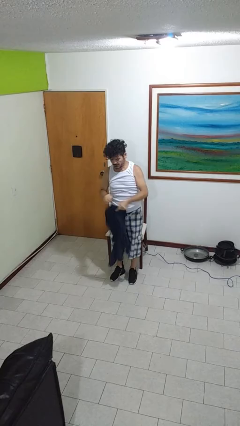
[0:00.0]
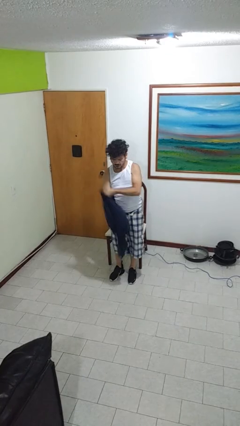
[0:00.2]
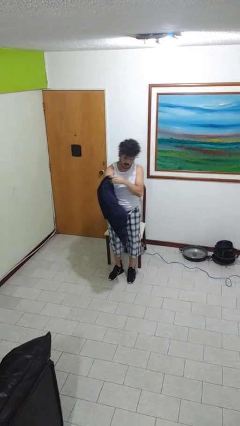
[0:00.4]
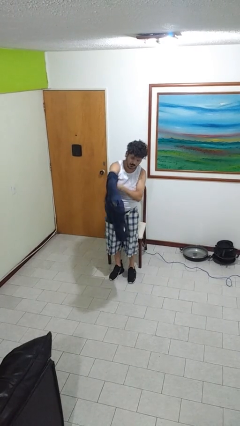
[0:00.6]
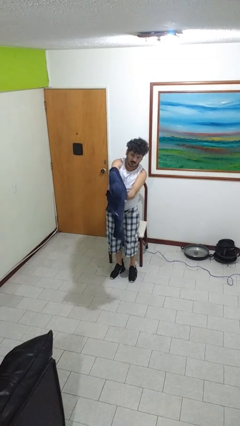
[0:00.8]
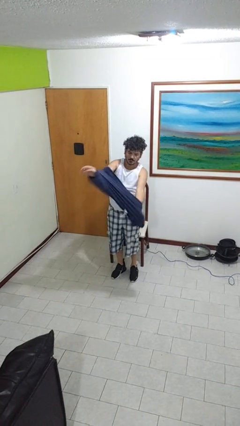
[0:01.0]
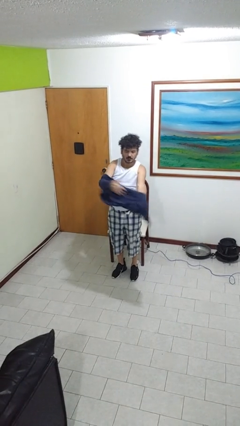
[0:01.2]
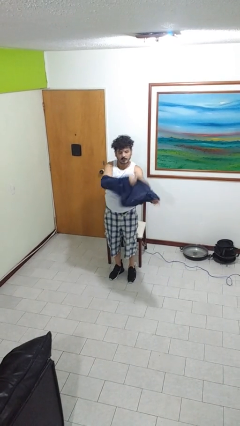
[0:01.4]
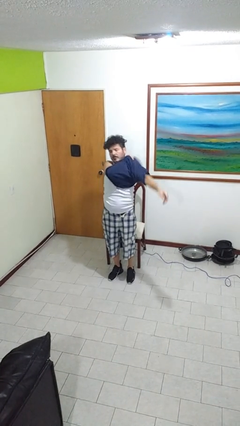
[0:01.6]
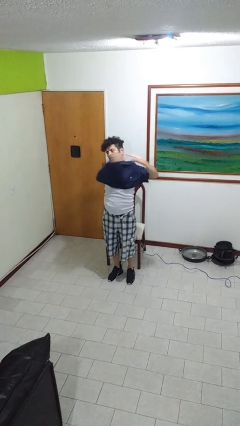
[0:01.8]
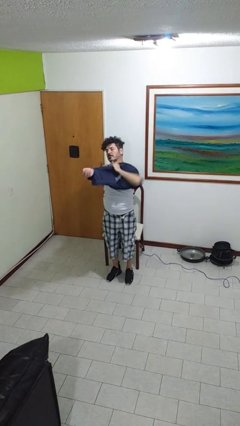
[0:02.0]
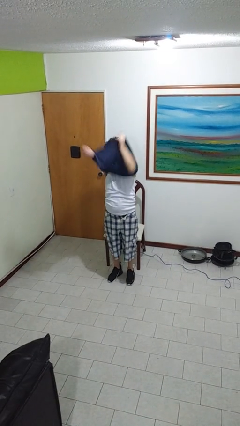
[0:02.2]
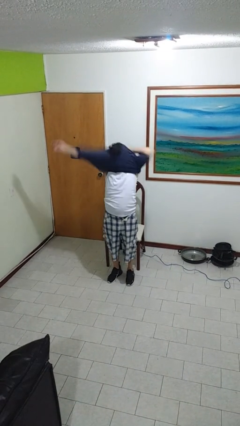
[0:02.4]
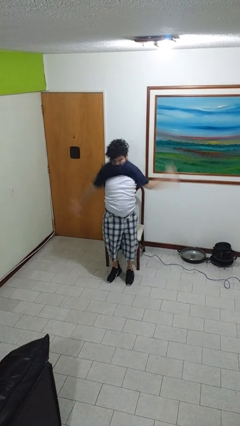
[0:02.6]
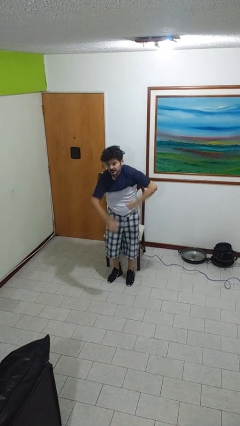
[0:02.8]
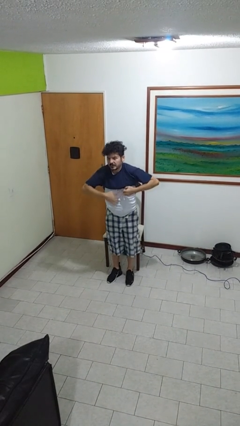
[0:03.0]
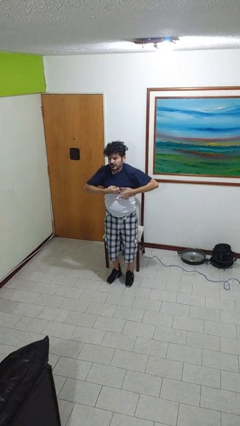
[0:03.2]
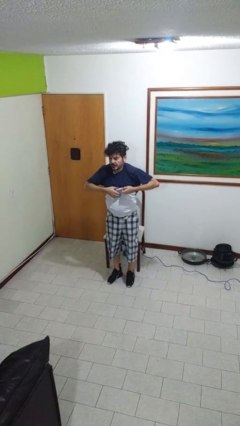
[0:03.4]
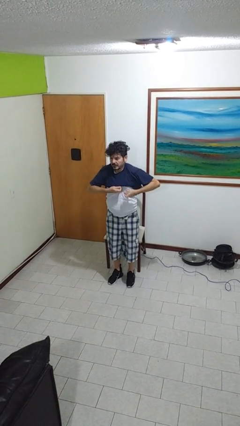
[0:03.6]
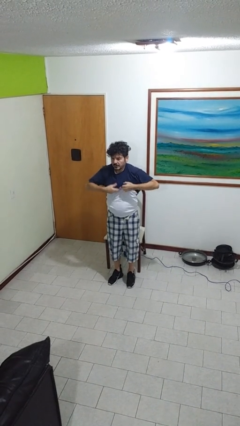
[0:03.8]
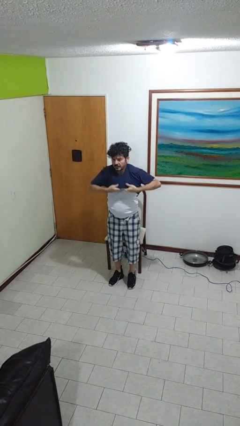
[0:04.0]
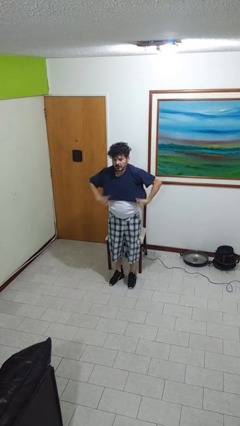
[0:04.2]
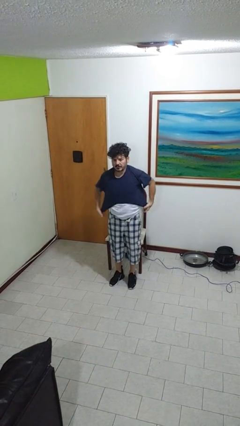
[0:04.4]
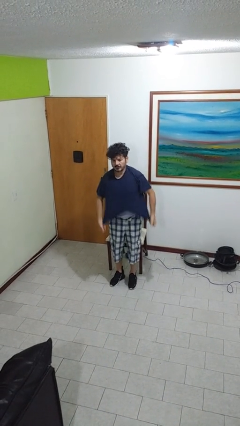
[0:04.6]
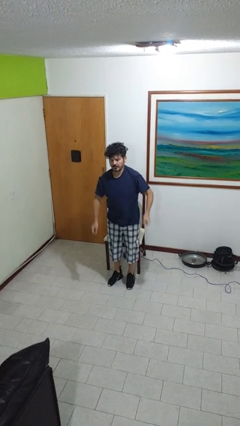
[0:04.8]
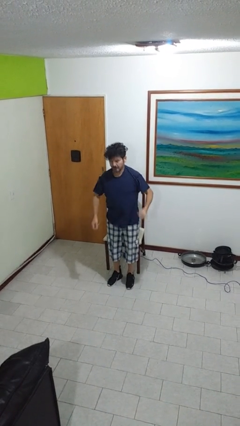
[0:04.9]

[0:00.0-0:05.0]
person puts on shirt

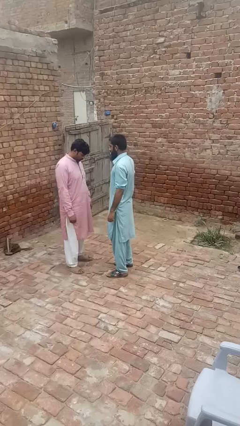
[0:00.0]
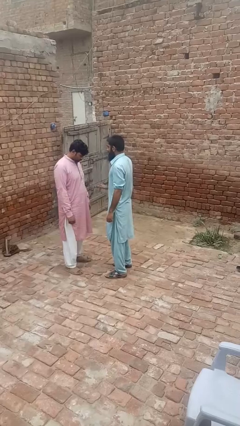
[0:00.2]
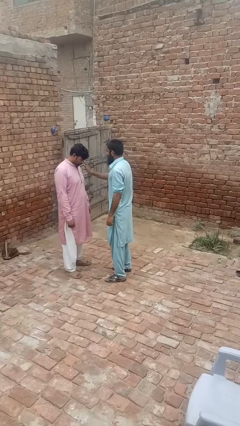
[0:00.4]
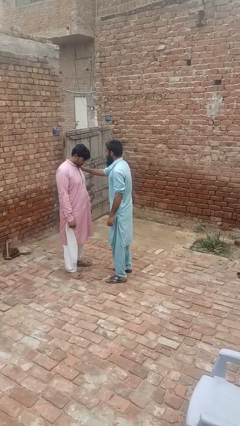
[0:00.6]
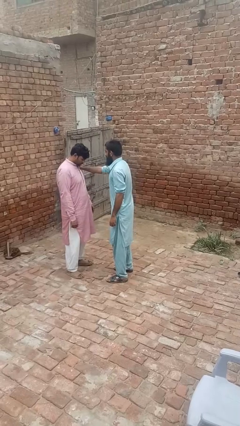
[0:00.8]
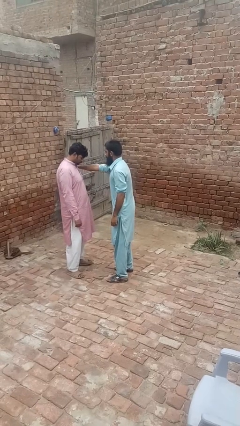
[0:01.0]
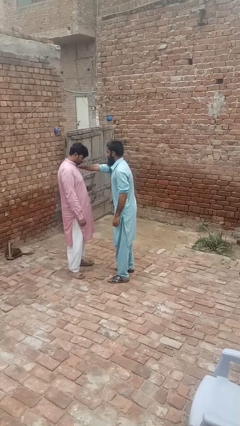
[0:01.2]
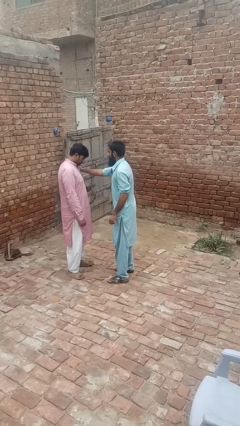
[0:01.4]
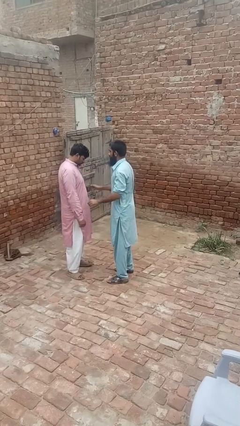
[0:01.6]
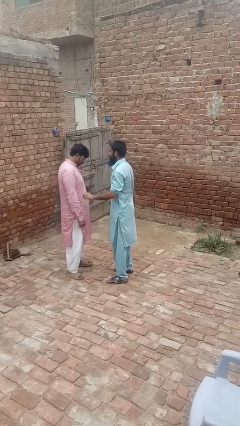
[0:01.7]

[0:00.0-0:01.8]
person shoves person

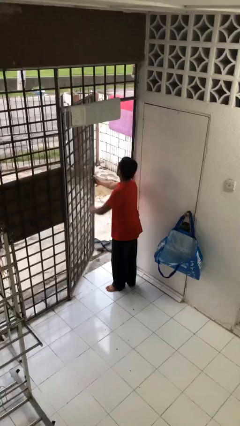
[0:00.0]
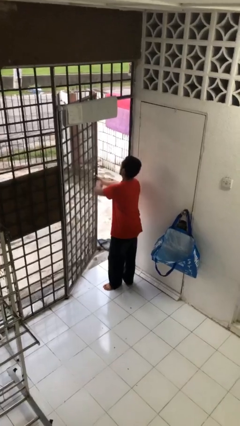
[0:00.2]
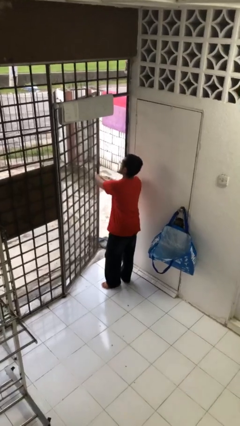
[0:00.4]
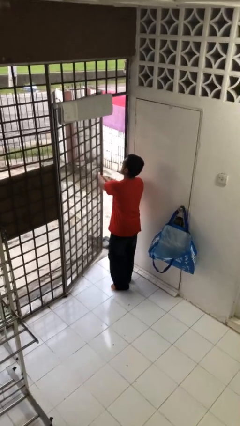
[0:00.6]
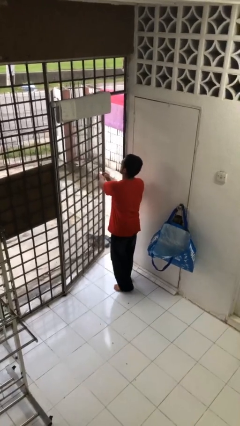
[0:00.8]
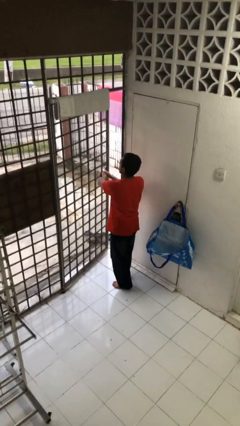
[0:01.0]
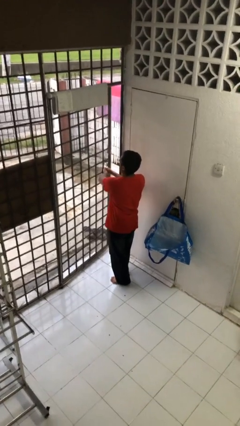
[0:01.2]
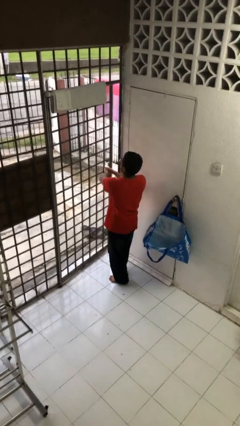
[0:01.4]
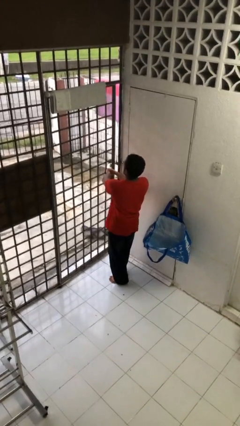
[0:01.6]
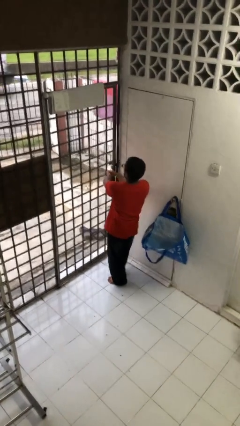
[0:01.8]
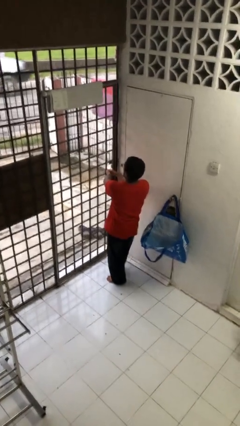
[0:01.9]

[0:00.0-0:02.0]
person closes facility door

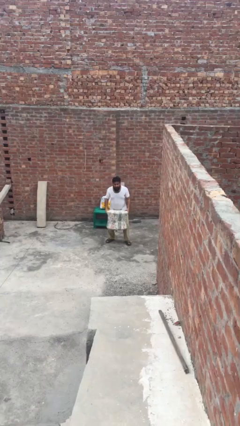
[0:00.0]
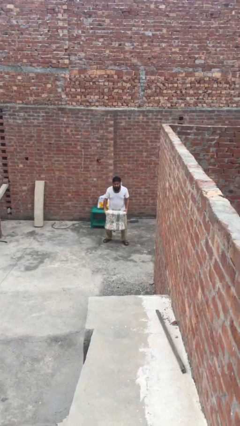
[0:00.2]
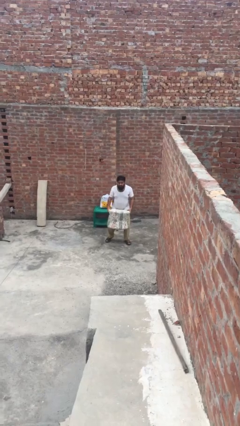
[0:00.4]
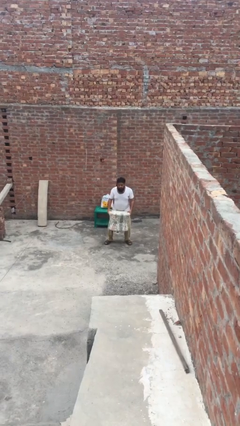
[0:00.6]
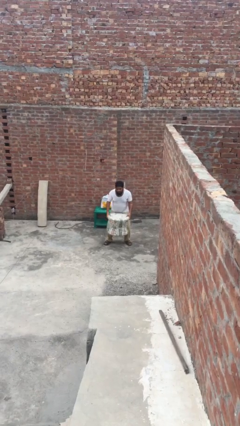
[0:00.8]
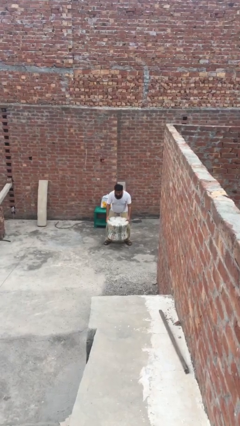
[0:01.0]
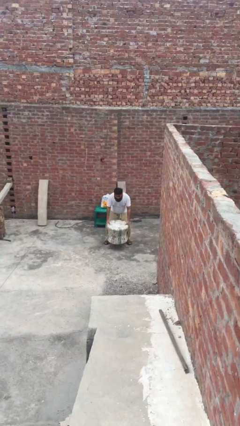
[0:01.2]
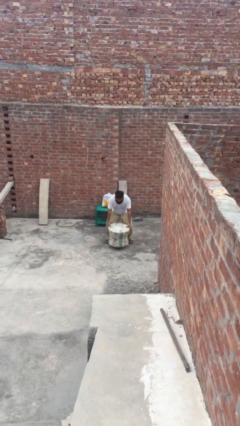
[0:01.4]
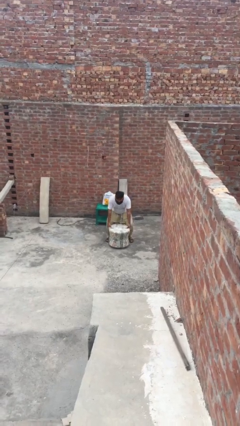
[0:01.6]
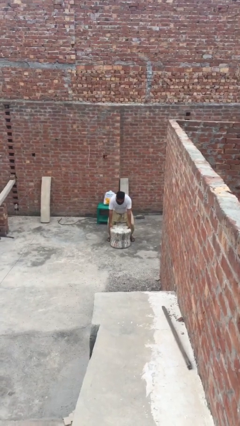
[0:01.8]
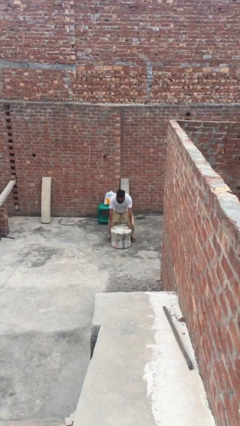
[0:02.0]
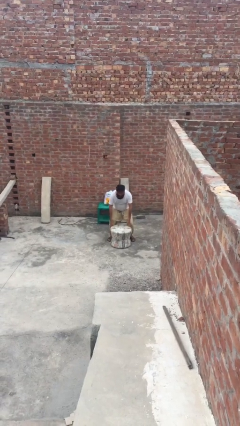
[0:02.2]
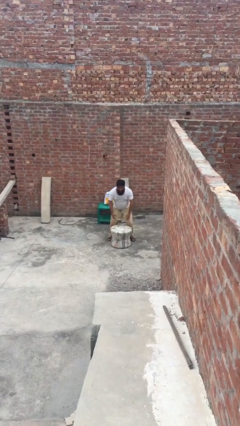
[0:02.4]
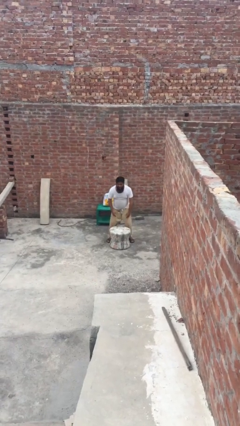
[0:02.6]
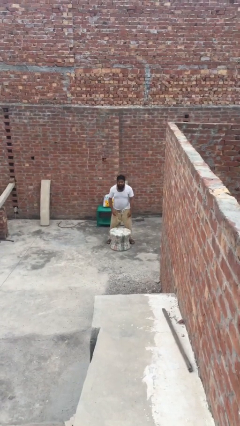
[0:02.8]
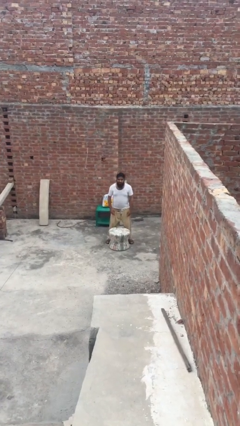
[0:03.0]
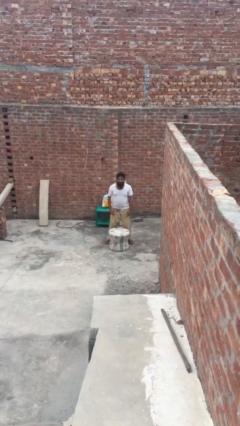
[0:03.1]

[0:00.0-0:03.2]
person puts down object on floor

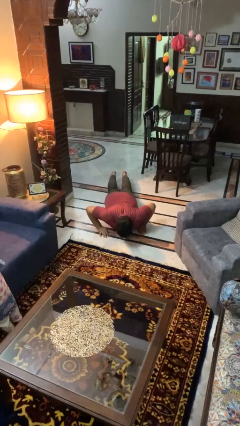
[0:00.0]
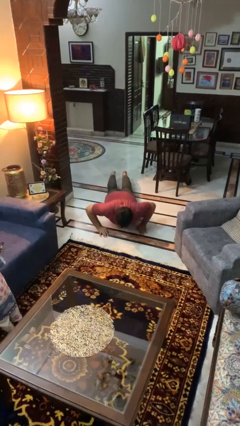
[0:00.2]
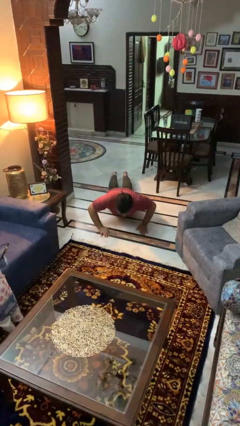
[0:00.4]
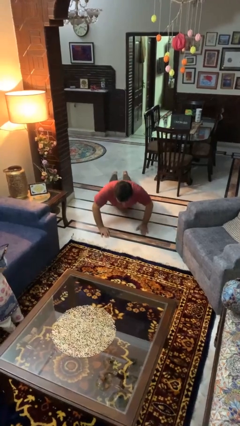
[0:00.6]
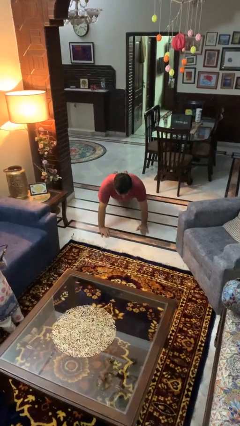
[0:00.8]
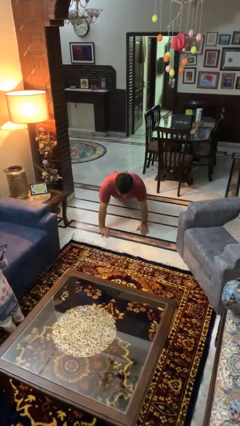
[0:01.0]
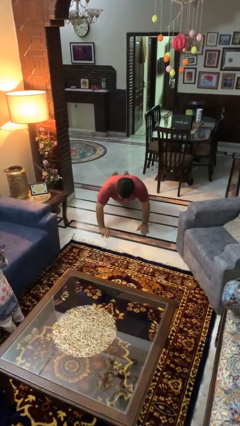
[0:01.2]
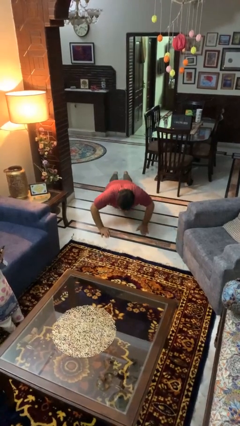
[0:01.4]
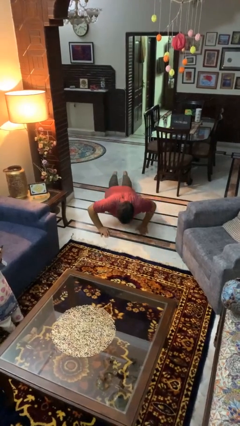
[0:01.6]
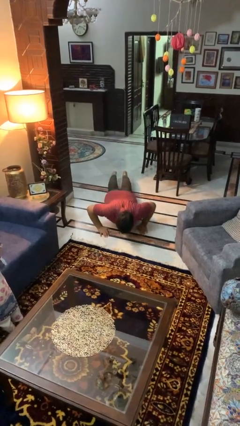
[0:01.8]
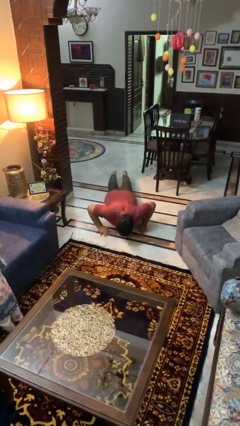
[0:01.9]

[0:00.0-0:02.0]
person exercises with pushup

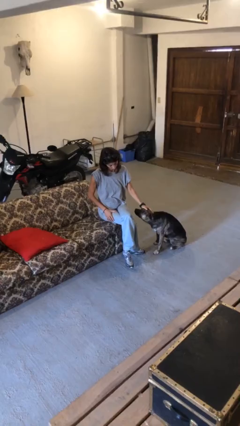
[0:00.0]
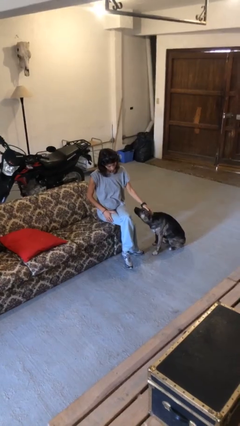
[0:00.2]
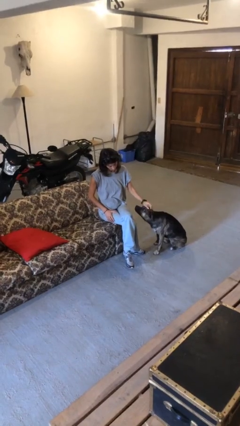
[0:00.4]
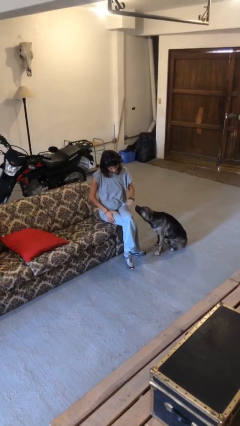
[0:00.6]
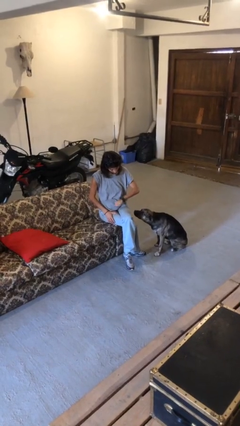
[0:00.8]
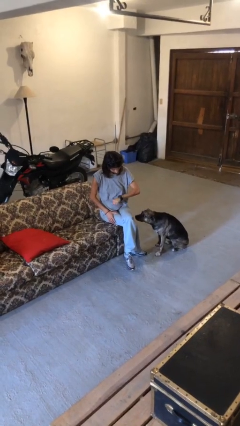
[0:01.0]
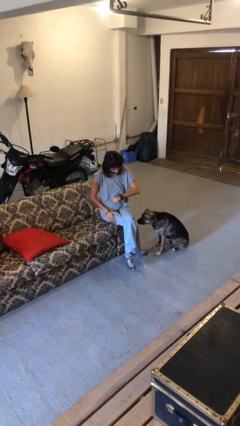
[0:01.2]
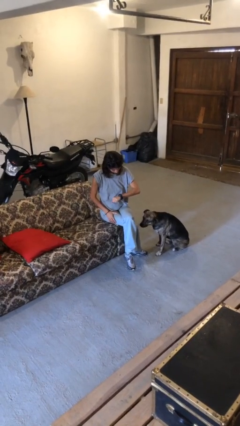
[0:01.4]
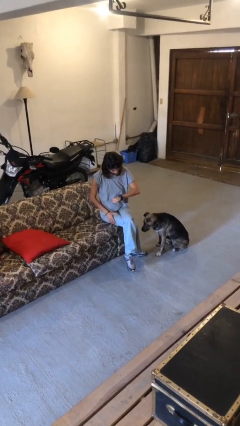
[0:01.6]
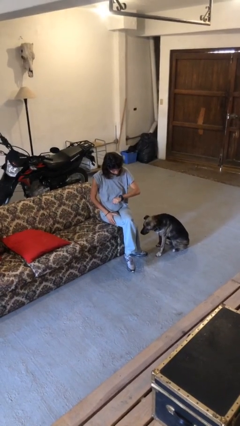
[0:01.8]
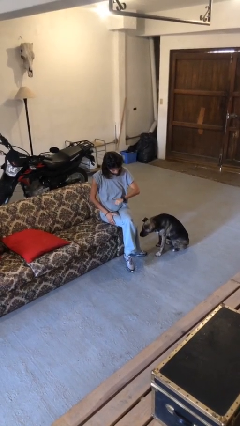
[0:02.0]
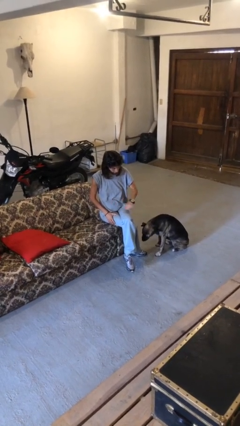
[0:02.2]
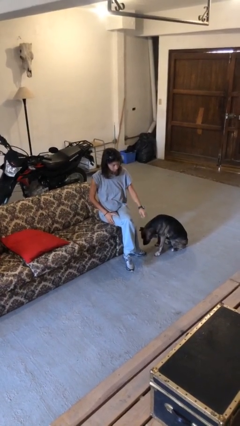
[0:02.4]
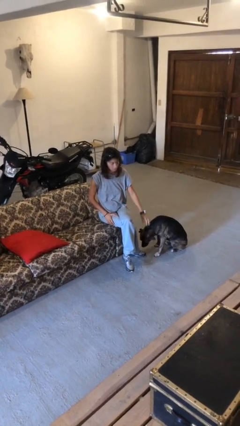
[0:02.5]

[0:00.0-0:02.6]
person looks at wristwatch

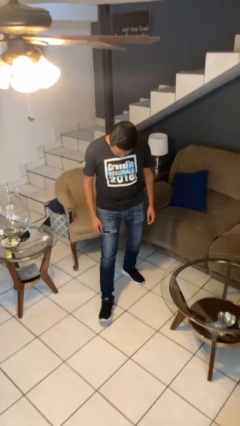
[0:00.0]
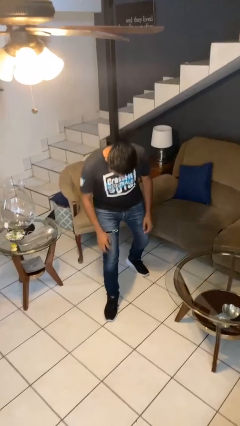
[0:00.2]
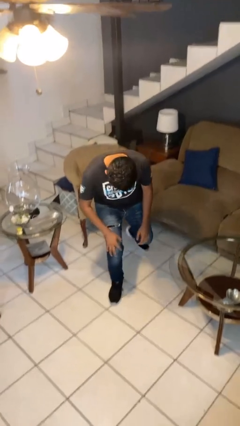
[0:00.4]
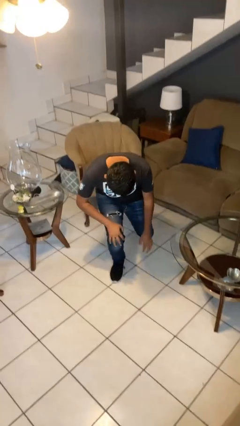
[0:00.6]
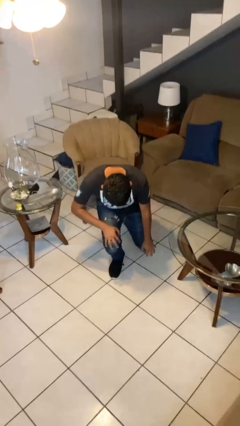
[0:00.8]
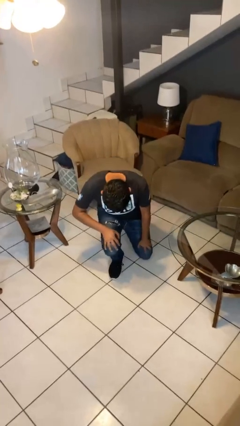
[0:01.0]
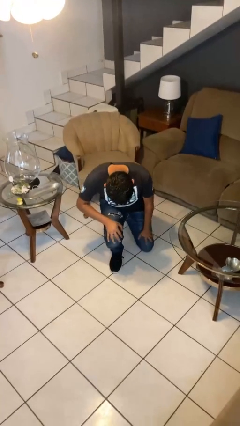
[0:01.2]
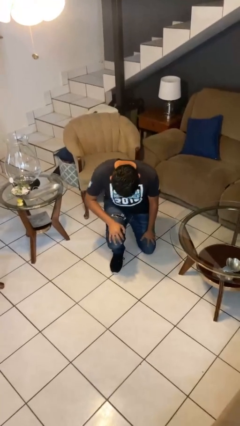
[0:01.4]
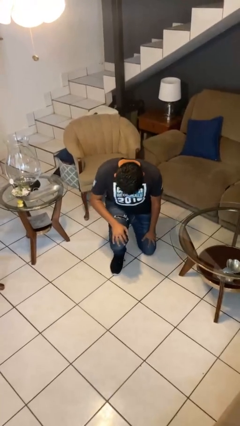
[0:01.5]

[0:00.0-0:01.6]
person kneels
